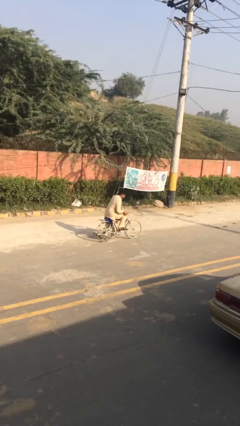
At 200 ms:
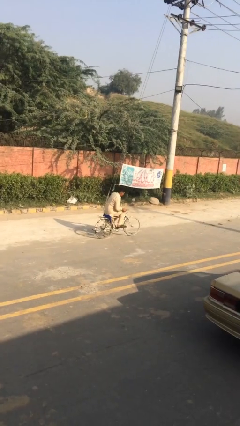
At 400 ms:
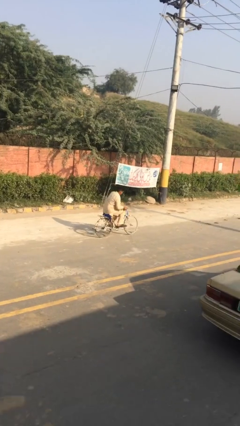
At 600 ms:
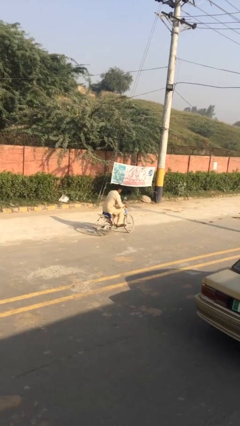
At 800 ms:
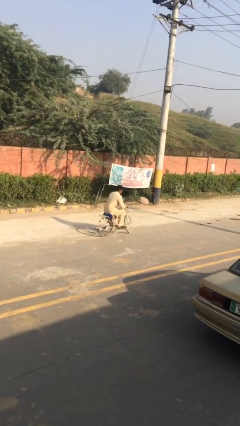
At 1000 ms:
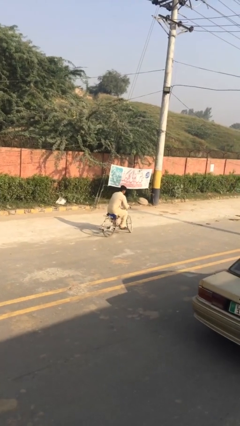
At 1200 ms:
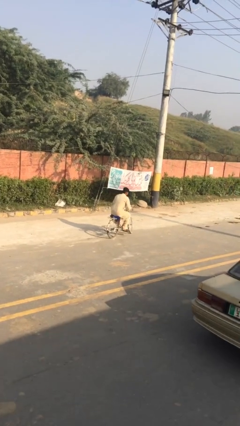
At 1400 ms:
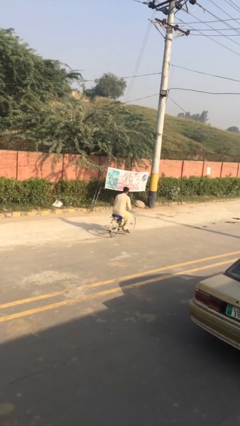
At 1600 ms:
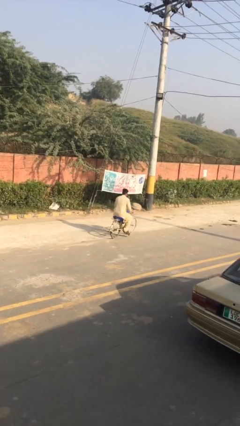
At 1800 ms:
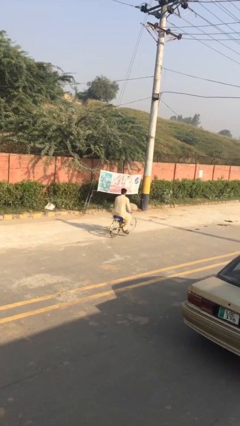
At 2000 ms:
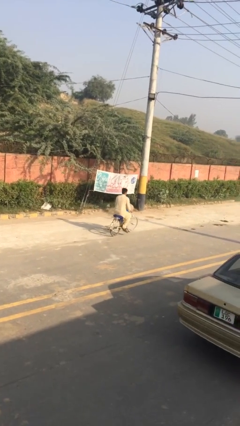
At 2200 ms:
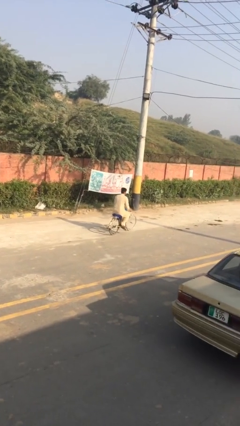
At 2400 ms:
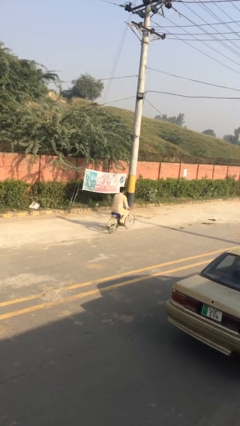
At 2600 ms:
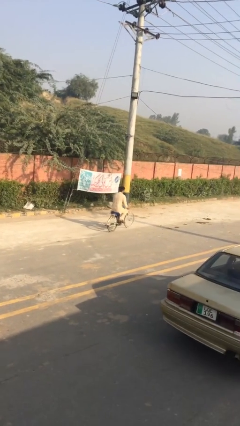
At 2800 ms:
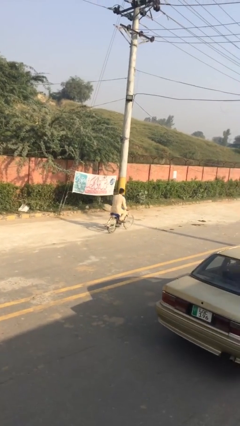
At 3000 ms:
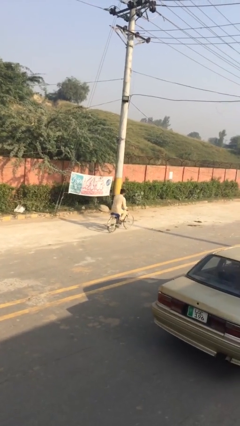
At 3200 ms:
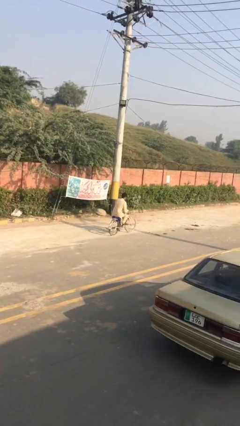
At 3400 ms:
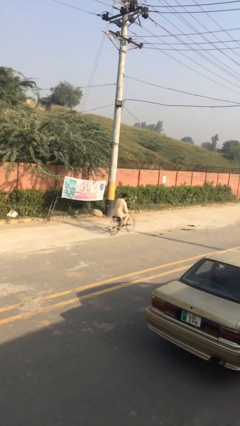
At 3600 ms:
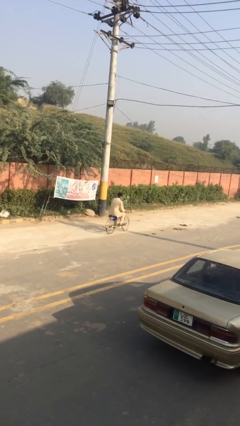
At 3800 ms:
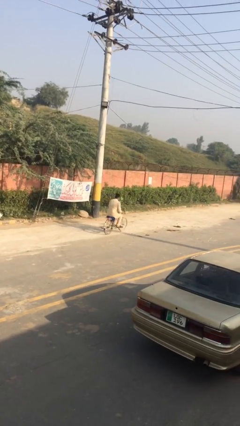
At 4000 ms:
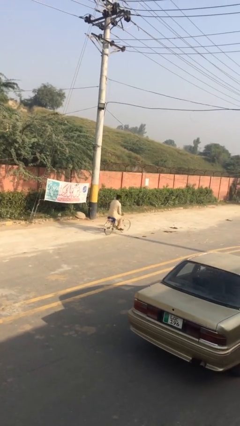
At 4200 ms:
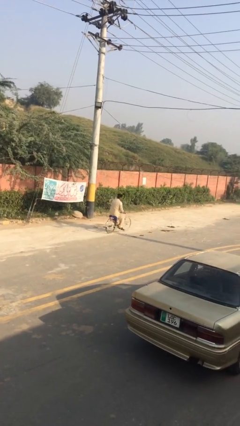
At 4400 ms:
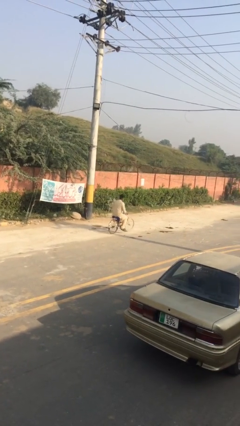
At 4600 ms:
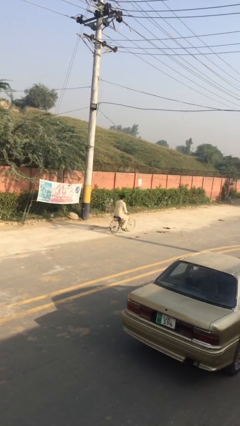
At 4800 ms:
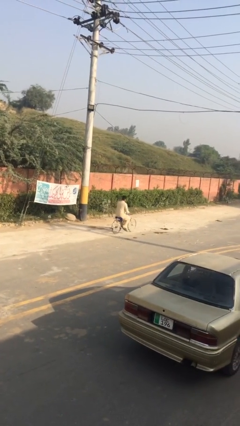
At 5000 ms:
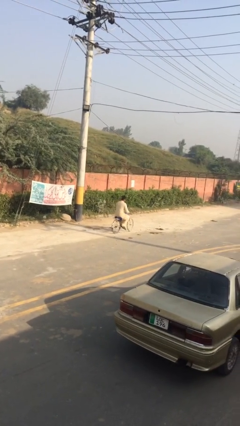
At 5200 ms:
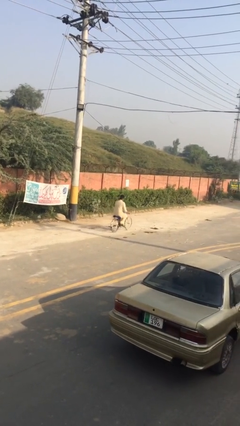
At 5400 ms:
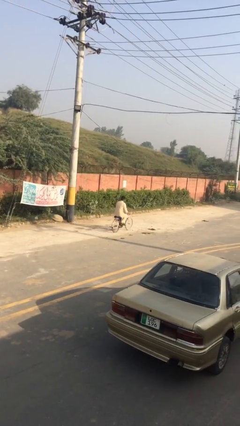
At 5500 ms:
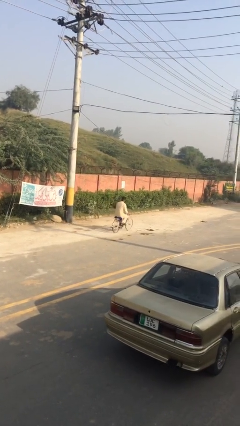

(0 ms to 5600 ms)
person rides bicycle

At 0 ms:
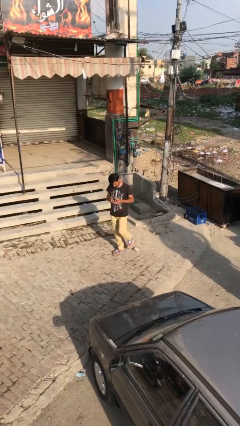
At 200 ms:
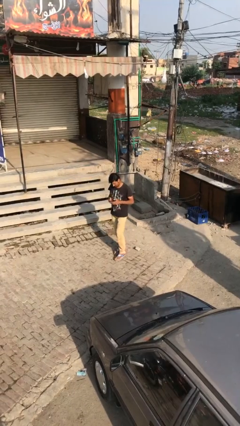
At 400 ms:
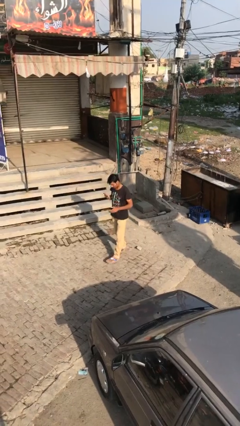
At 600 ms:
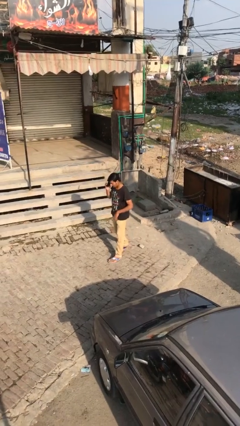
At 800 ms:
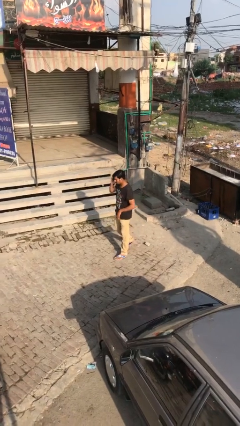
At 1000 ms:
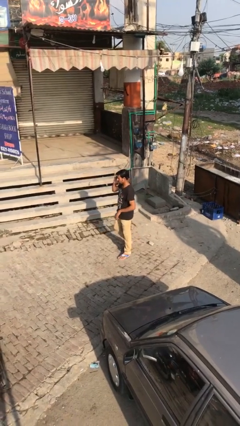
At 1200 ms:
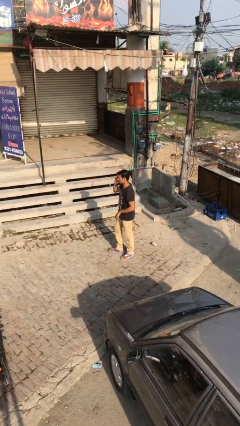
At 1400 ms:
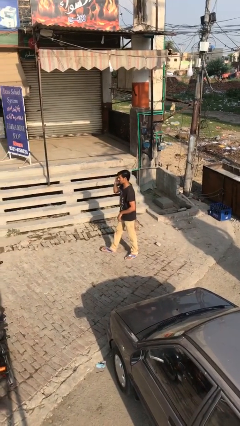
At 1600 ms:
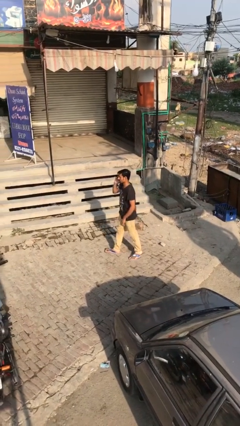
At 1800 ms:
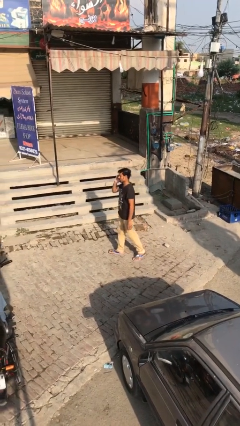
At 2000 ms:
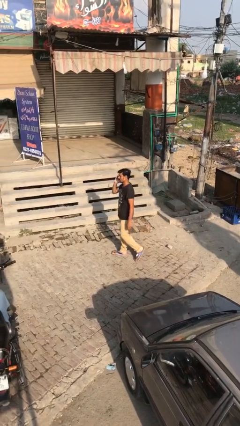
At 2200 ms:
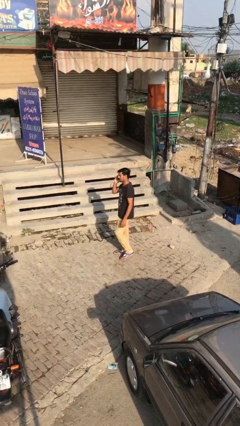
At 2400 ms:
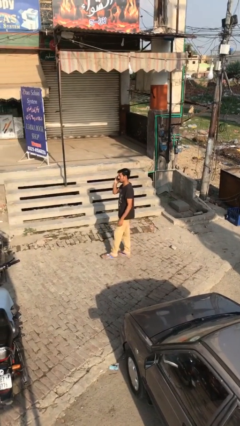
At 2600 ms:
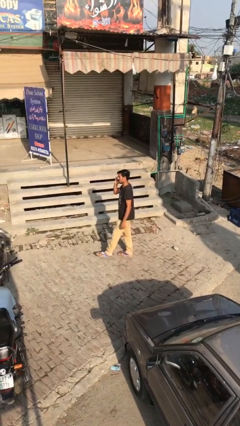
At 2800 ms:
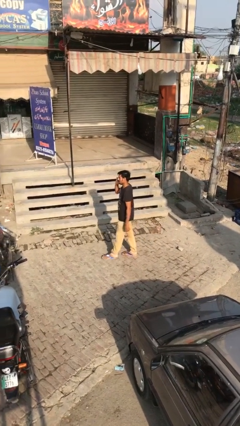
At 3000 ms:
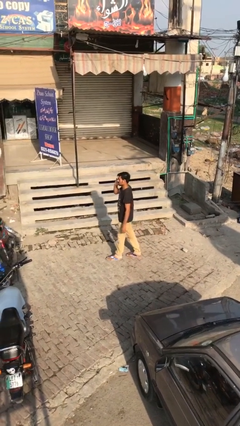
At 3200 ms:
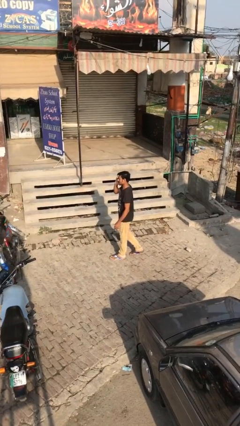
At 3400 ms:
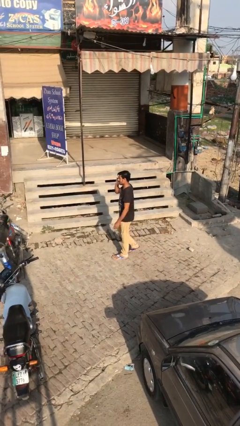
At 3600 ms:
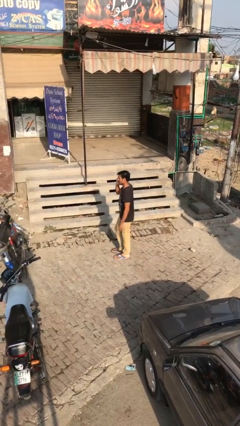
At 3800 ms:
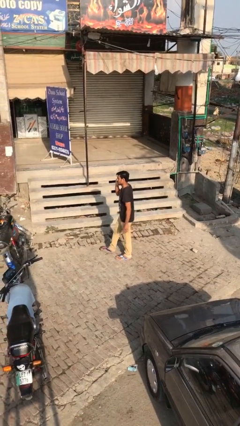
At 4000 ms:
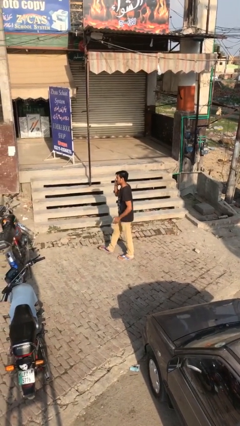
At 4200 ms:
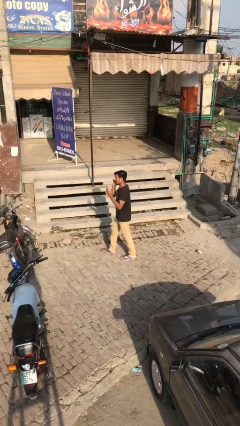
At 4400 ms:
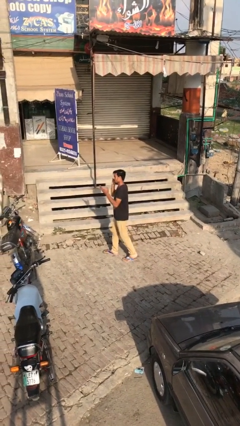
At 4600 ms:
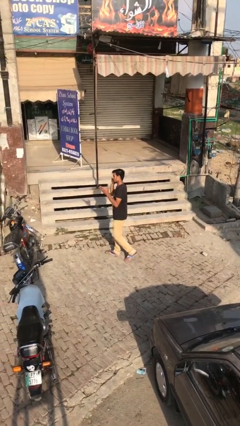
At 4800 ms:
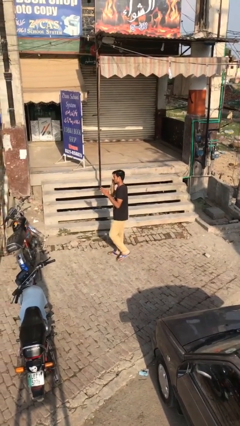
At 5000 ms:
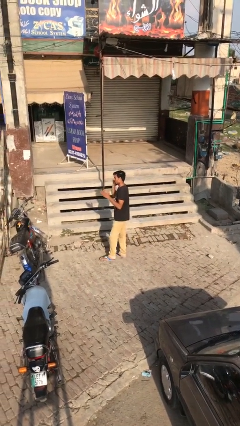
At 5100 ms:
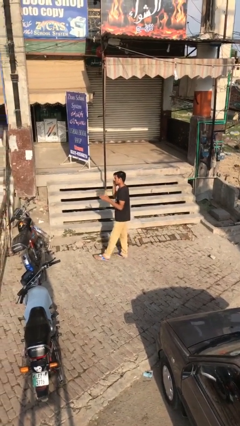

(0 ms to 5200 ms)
person talks on phone

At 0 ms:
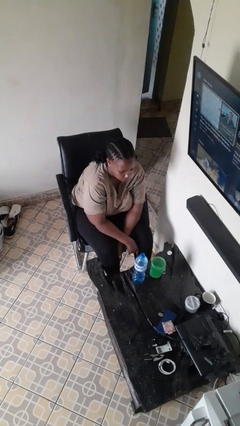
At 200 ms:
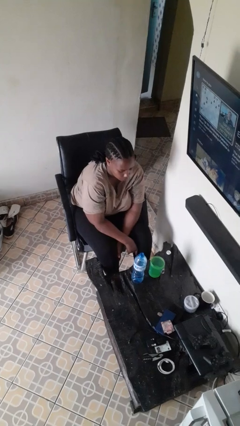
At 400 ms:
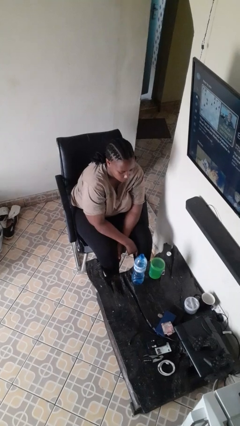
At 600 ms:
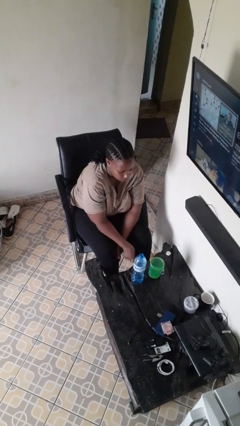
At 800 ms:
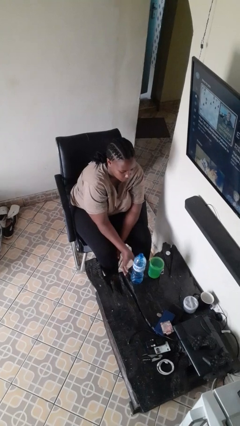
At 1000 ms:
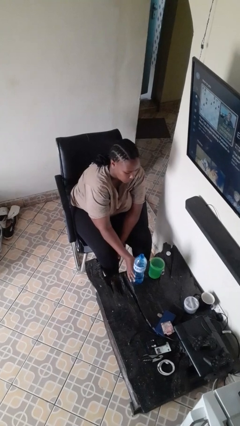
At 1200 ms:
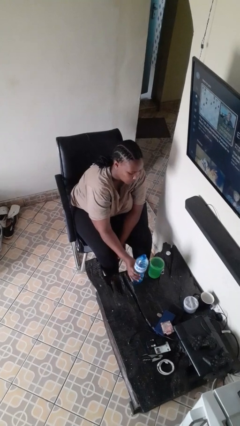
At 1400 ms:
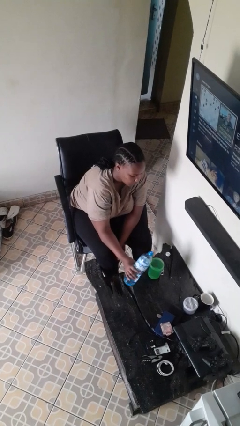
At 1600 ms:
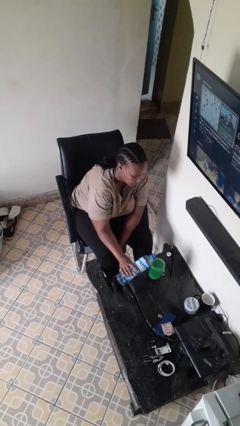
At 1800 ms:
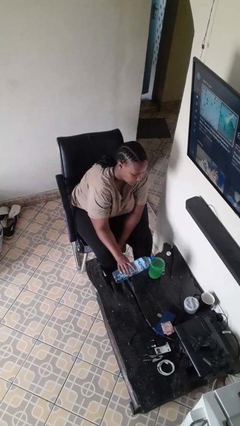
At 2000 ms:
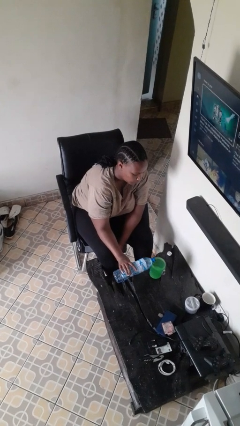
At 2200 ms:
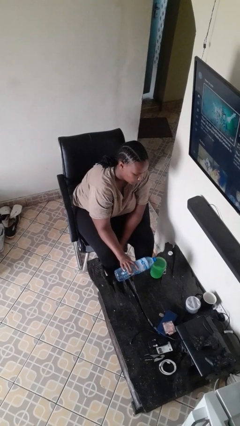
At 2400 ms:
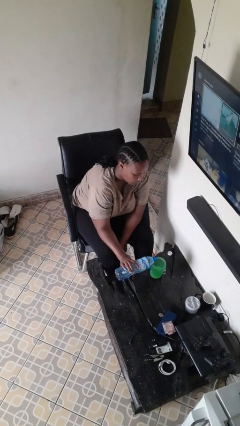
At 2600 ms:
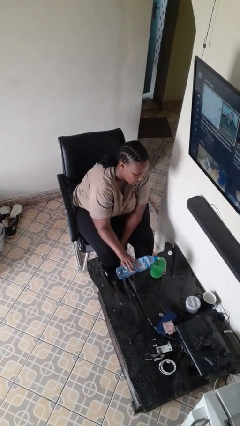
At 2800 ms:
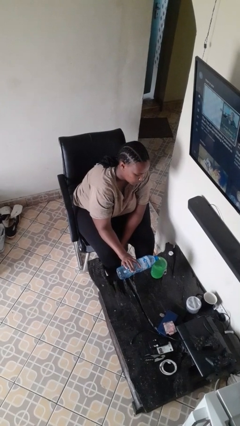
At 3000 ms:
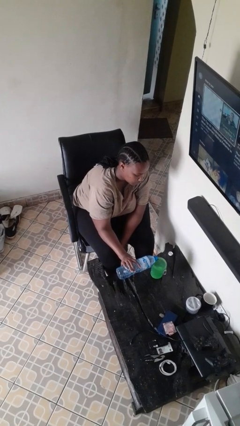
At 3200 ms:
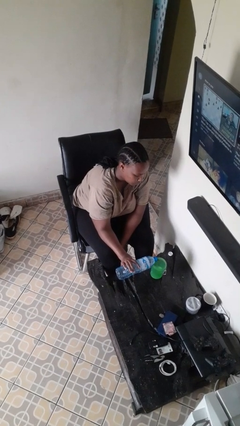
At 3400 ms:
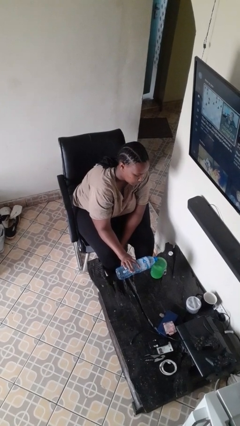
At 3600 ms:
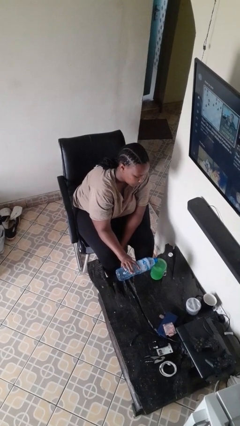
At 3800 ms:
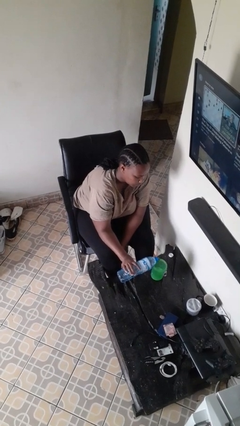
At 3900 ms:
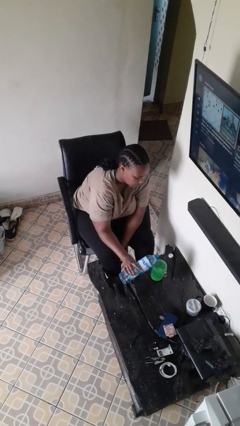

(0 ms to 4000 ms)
person pours liquid into cup

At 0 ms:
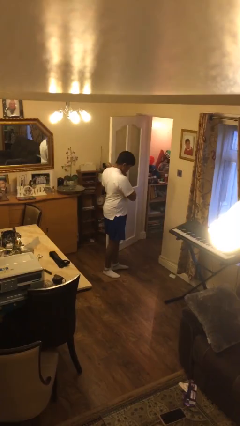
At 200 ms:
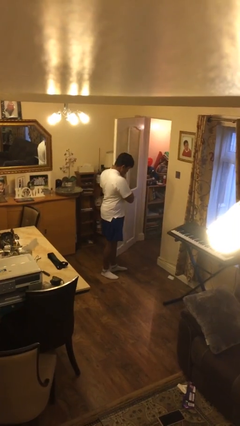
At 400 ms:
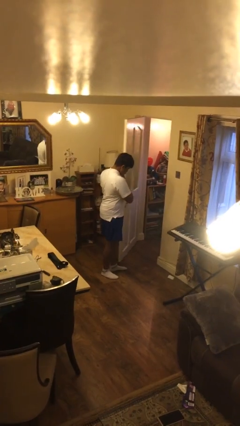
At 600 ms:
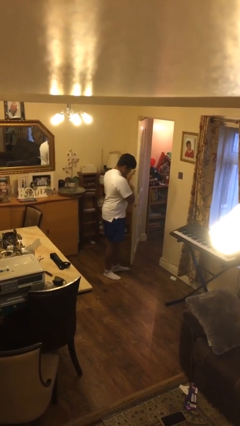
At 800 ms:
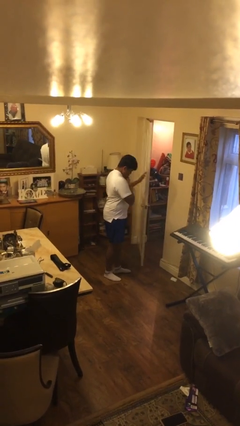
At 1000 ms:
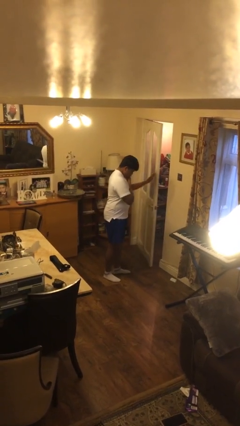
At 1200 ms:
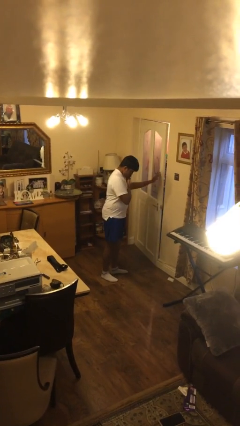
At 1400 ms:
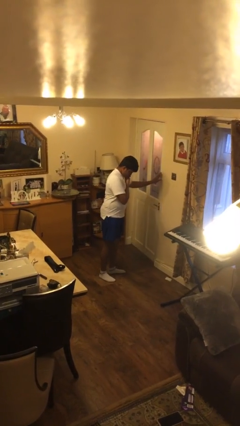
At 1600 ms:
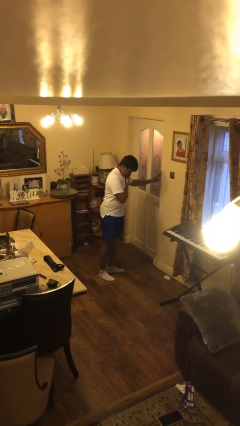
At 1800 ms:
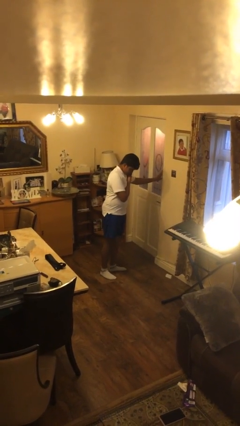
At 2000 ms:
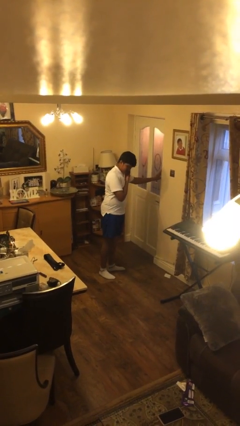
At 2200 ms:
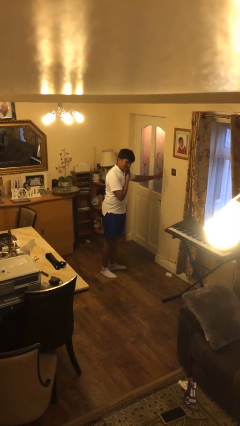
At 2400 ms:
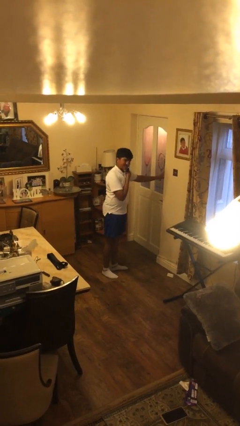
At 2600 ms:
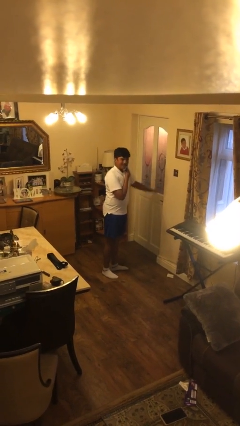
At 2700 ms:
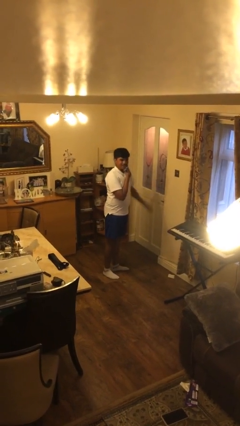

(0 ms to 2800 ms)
person closes facility door

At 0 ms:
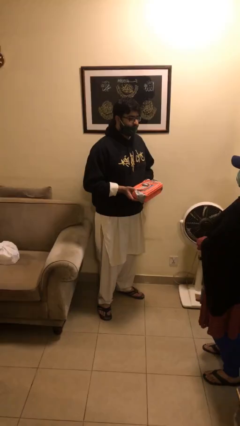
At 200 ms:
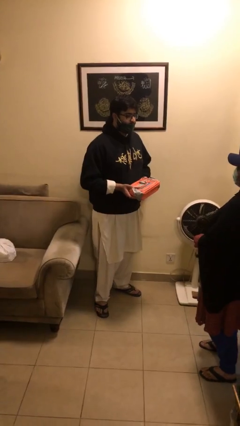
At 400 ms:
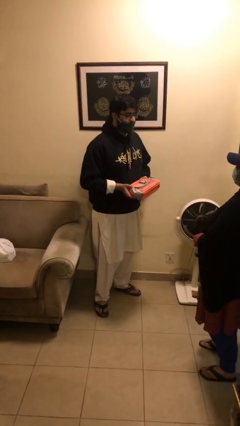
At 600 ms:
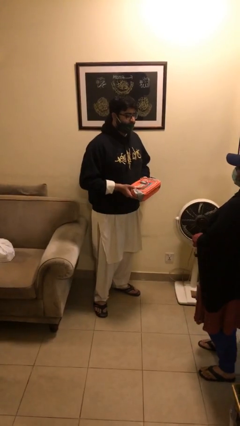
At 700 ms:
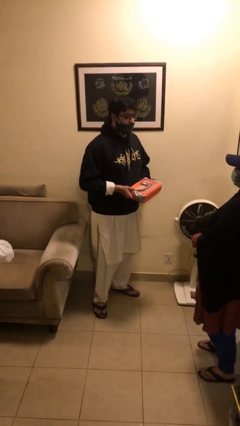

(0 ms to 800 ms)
person transfers object to person
